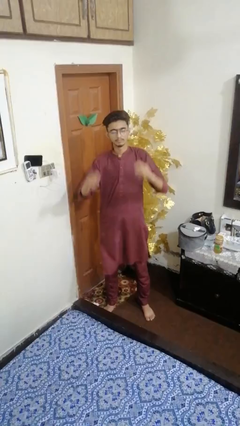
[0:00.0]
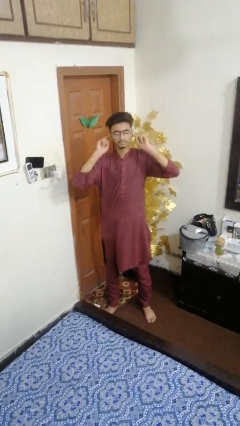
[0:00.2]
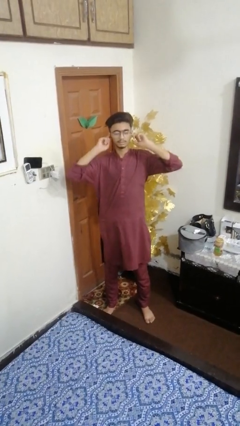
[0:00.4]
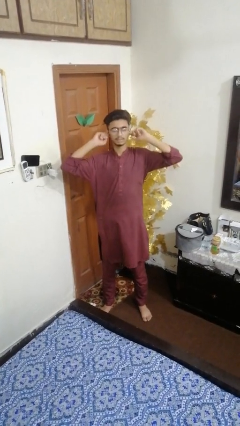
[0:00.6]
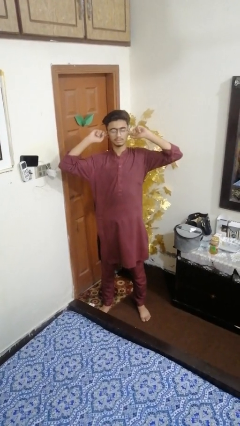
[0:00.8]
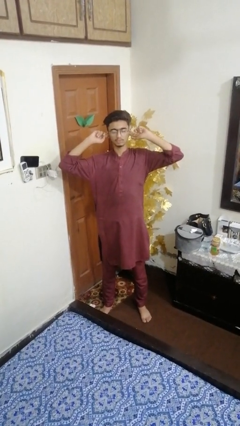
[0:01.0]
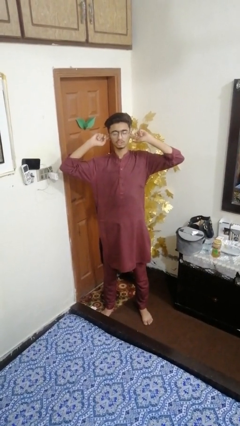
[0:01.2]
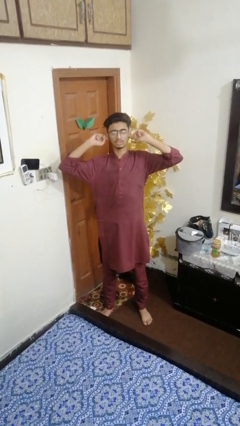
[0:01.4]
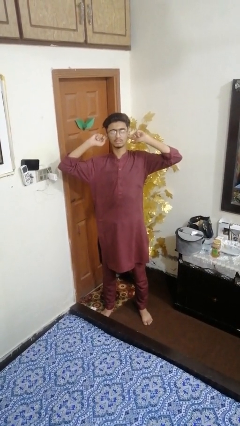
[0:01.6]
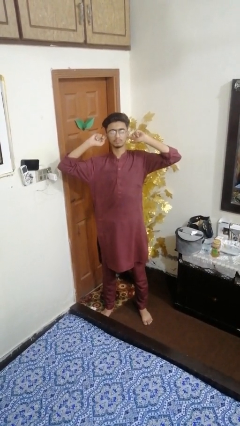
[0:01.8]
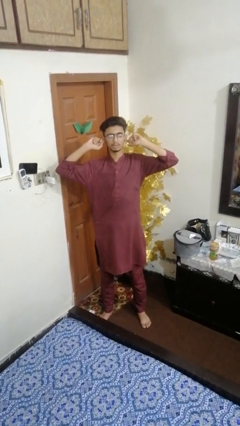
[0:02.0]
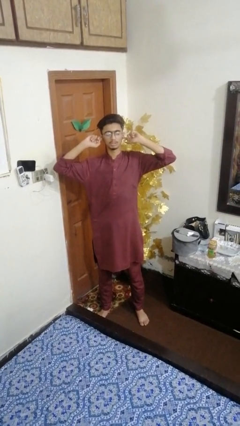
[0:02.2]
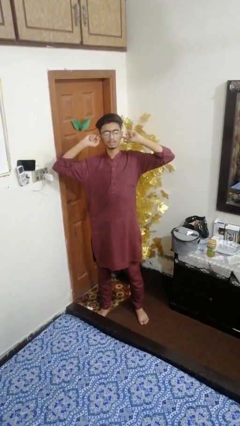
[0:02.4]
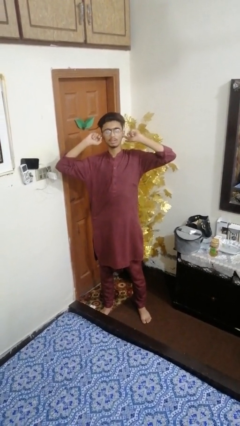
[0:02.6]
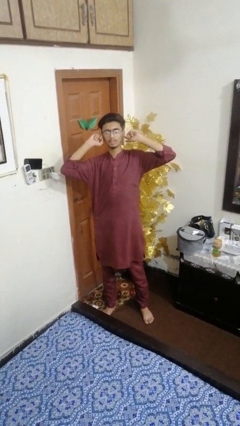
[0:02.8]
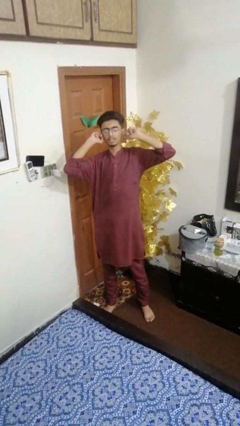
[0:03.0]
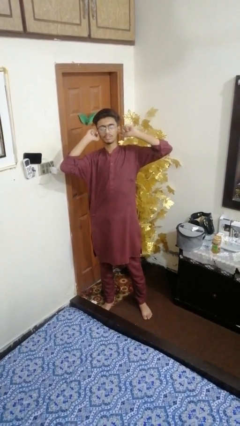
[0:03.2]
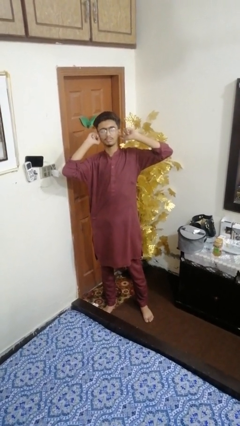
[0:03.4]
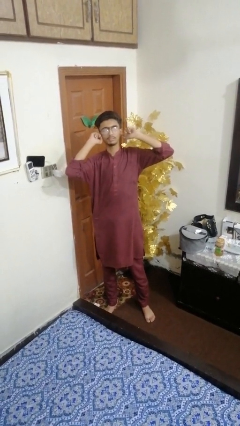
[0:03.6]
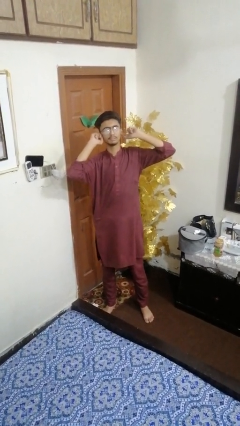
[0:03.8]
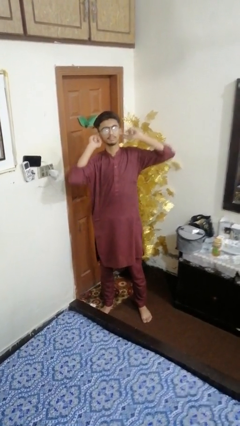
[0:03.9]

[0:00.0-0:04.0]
person puts fingers in ear

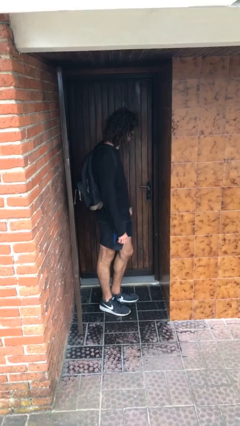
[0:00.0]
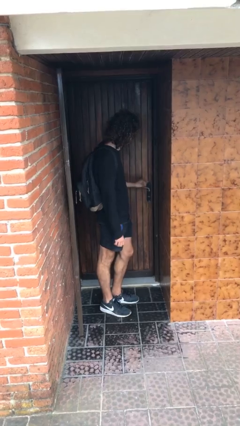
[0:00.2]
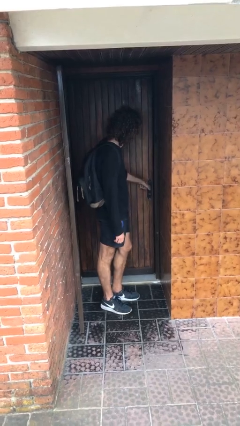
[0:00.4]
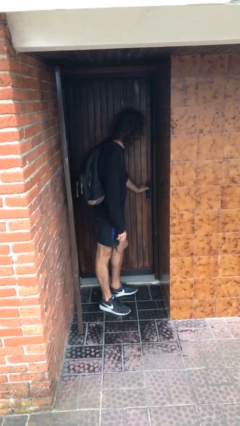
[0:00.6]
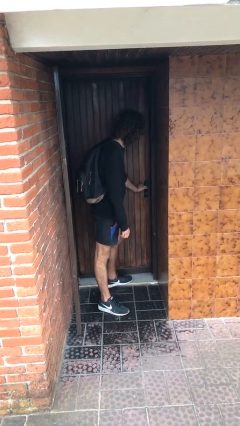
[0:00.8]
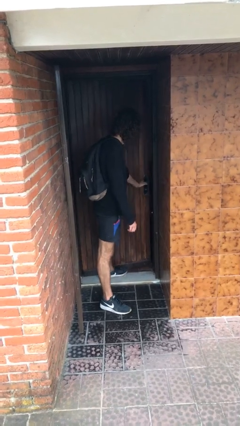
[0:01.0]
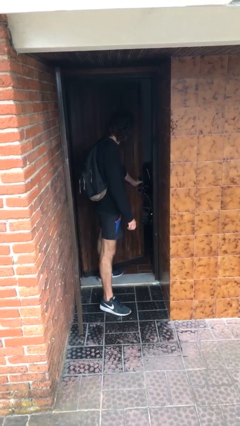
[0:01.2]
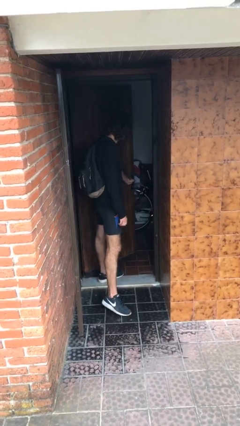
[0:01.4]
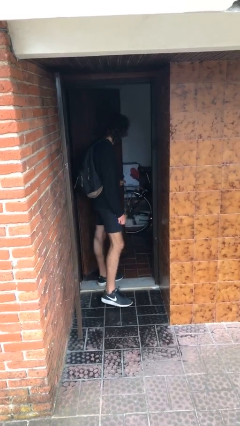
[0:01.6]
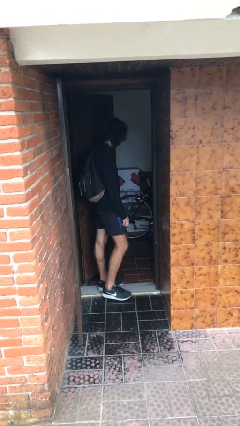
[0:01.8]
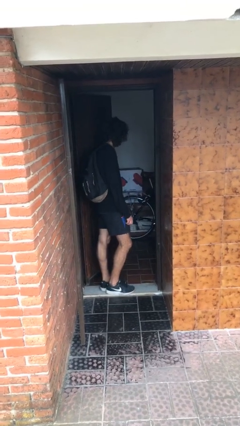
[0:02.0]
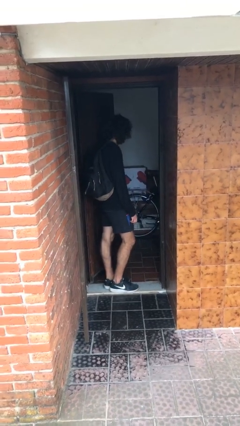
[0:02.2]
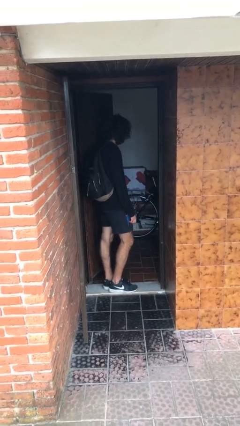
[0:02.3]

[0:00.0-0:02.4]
person opens facility door

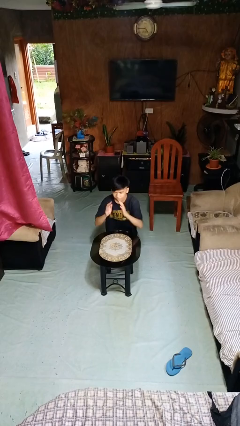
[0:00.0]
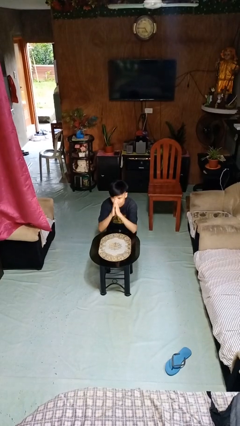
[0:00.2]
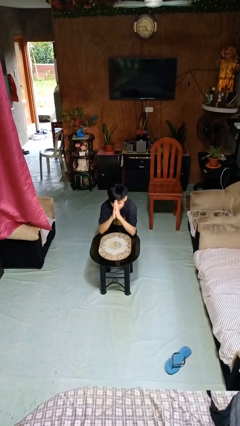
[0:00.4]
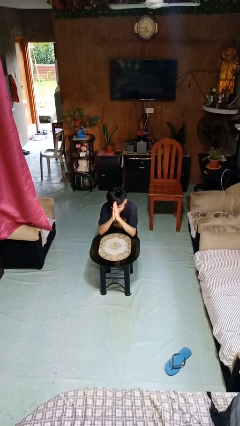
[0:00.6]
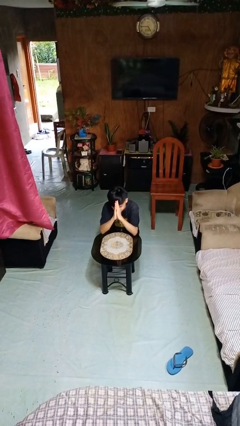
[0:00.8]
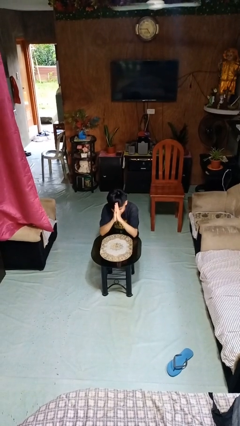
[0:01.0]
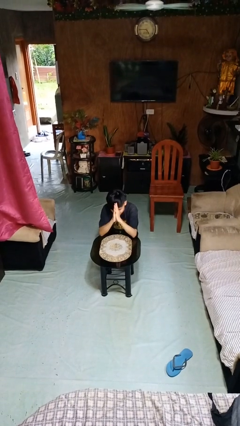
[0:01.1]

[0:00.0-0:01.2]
person prays

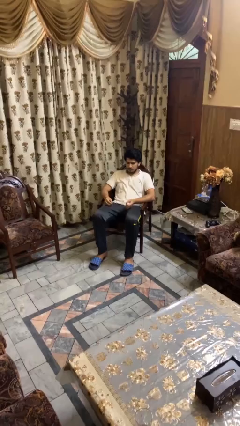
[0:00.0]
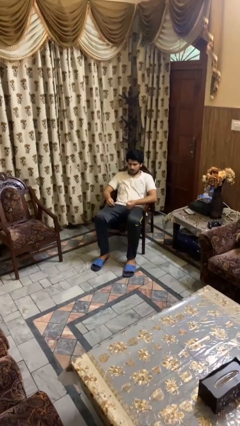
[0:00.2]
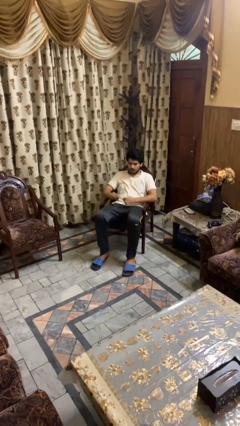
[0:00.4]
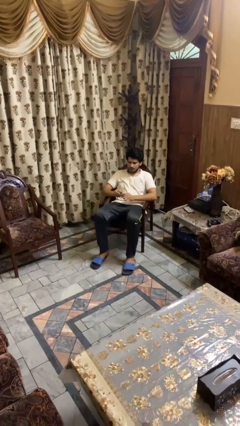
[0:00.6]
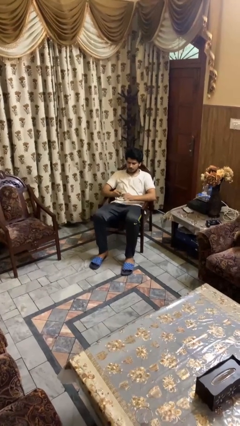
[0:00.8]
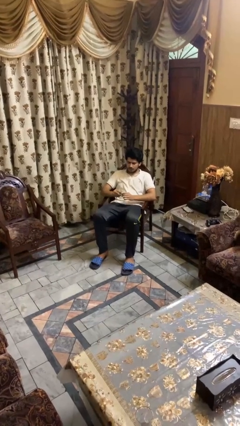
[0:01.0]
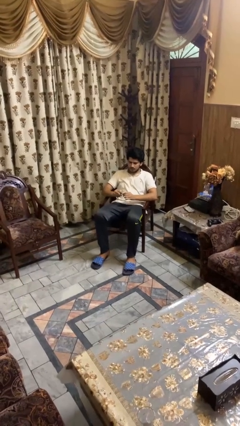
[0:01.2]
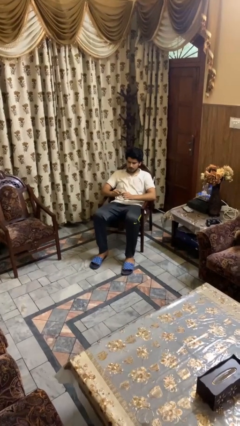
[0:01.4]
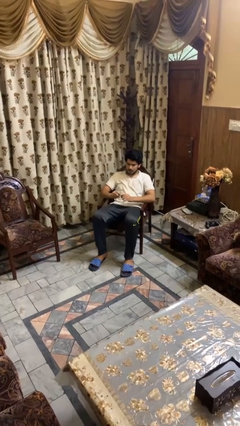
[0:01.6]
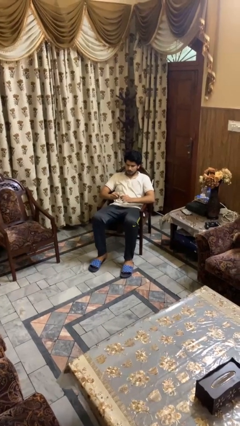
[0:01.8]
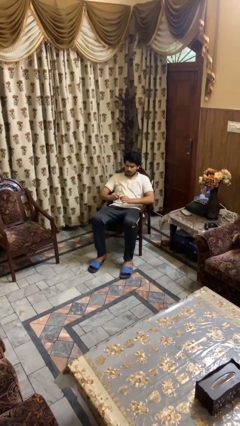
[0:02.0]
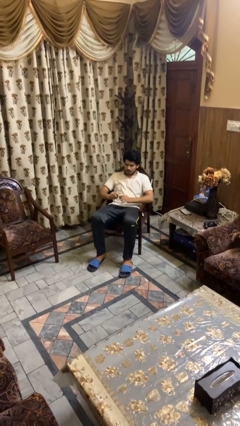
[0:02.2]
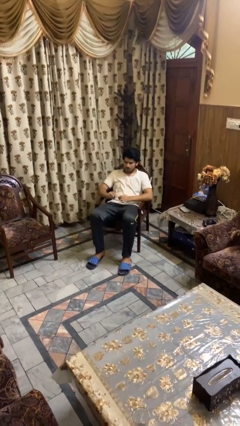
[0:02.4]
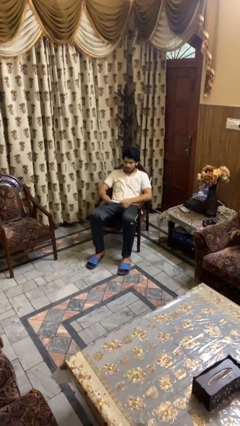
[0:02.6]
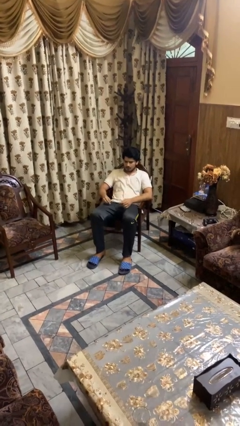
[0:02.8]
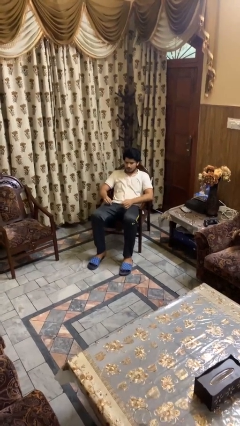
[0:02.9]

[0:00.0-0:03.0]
person files fingernails

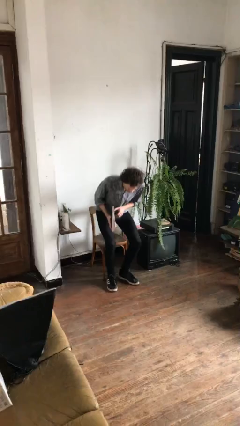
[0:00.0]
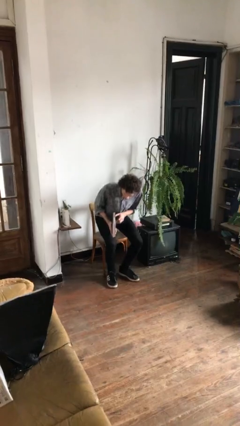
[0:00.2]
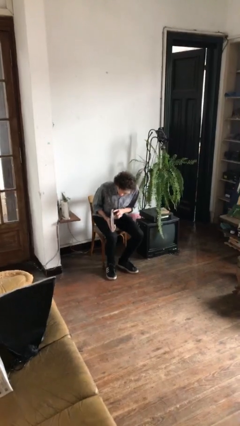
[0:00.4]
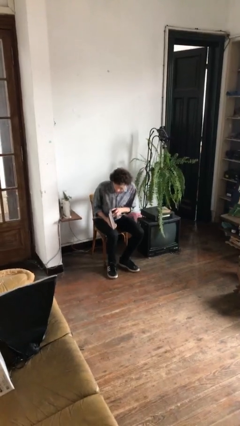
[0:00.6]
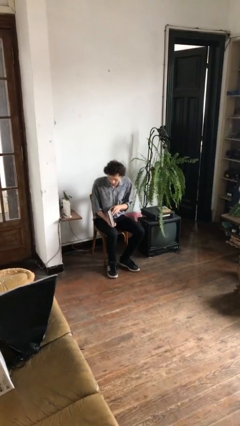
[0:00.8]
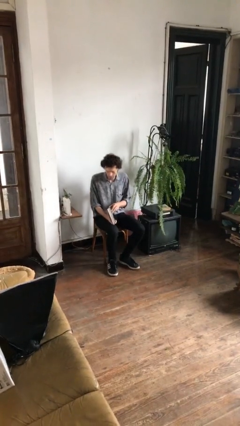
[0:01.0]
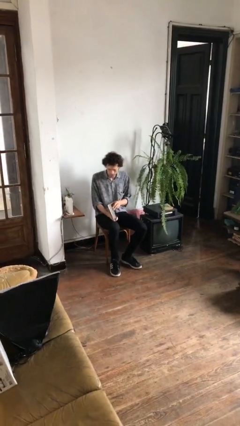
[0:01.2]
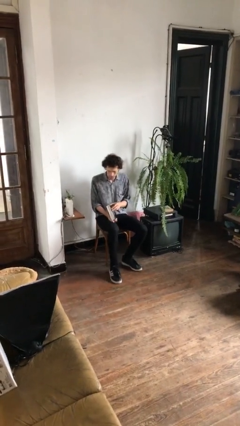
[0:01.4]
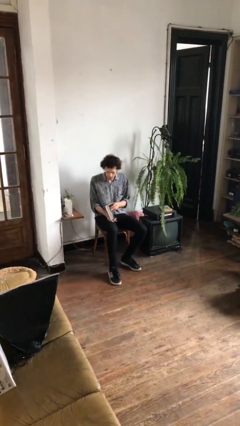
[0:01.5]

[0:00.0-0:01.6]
person sits down

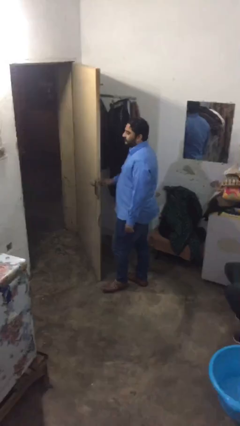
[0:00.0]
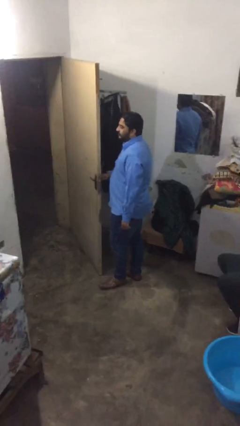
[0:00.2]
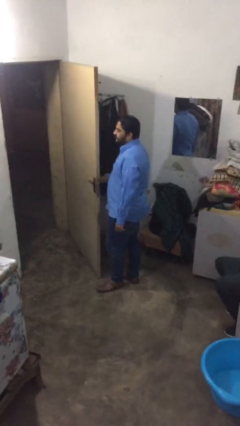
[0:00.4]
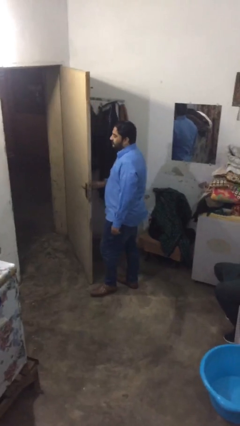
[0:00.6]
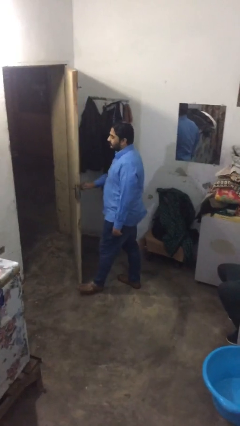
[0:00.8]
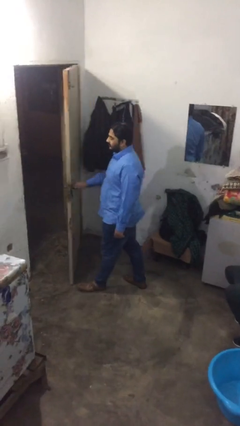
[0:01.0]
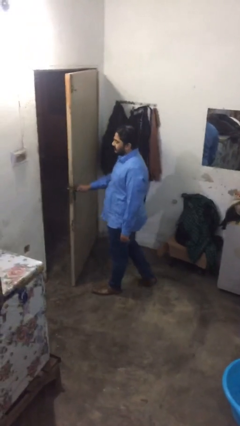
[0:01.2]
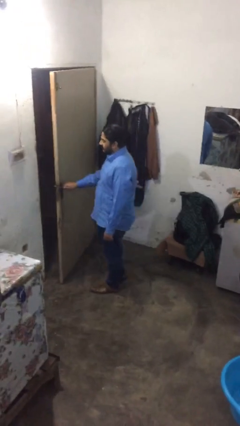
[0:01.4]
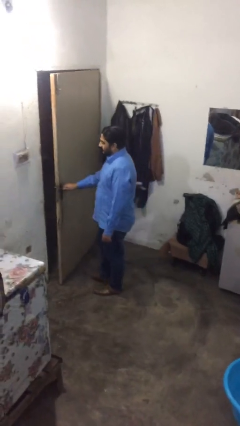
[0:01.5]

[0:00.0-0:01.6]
person closes facility door

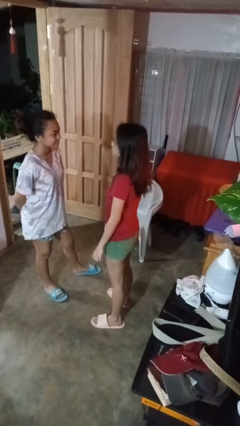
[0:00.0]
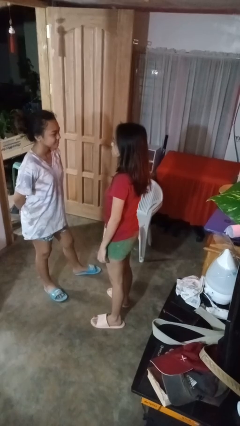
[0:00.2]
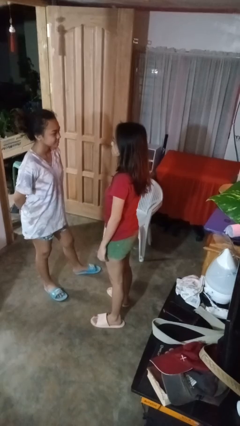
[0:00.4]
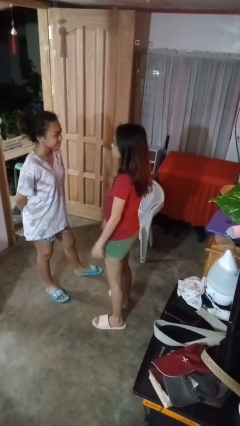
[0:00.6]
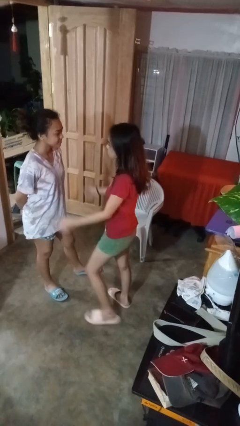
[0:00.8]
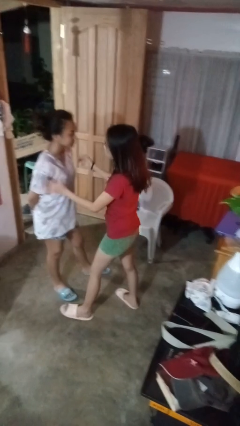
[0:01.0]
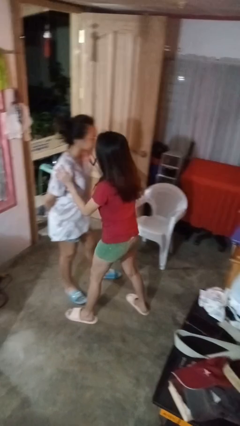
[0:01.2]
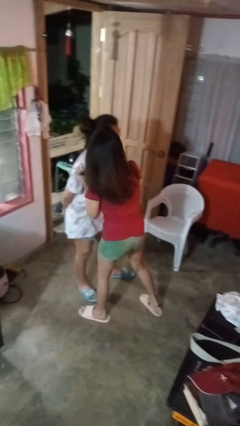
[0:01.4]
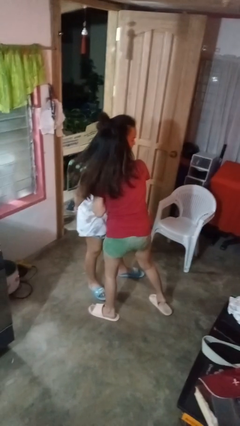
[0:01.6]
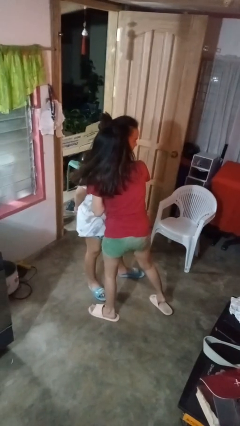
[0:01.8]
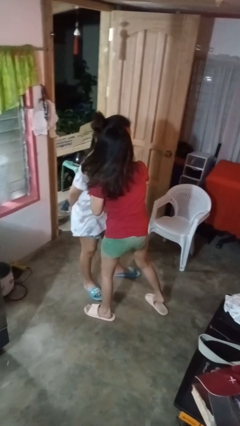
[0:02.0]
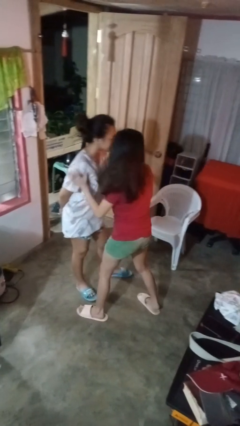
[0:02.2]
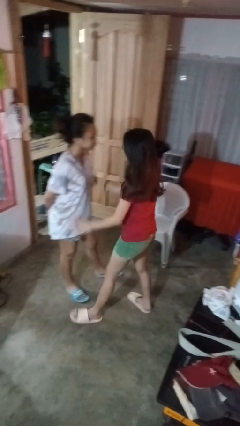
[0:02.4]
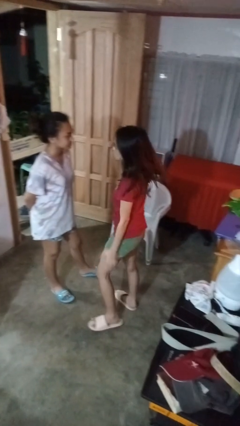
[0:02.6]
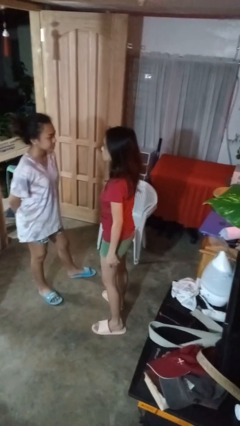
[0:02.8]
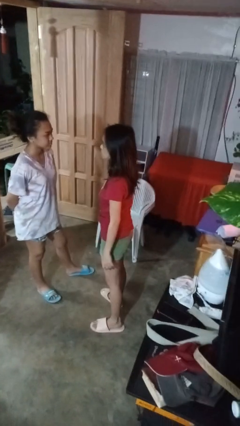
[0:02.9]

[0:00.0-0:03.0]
person kisses cheek of person

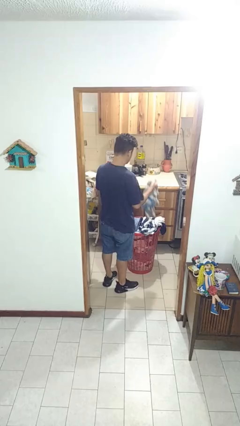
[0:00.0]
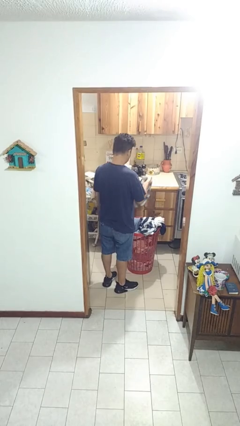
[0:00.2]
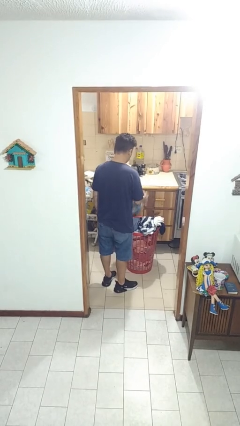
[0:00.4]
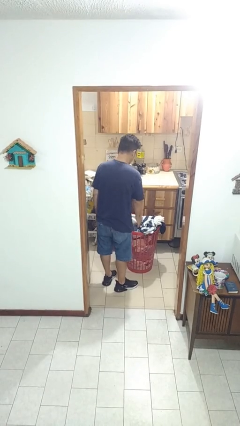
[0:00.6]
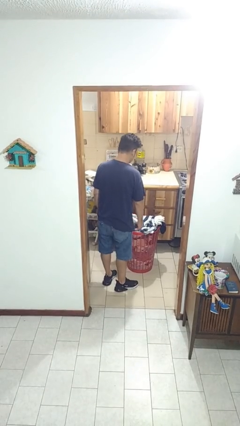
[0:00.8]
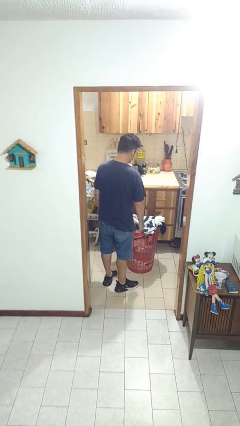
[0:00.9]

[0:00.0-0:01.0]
person puts object into basket
